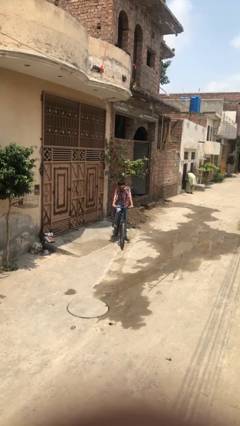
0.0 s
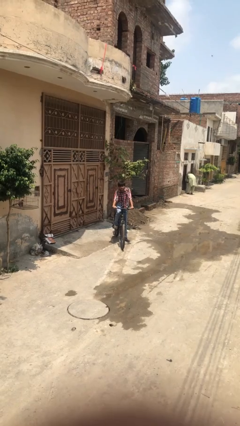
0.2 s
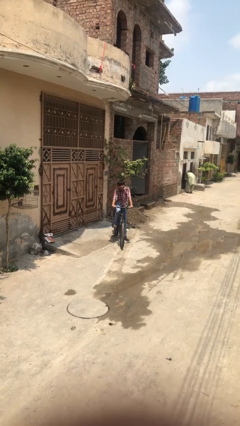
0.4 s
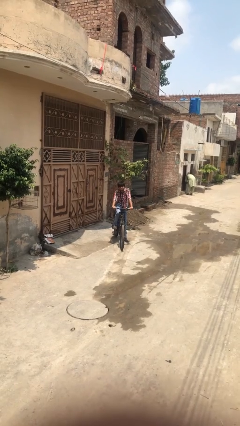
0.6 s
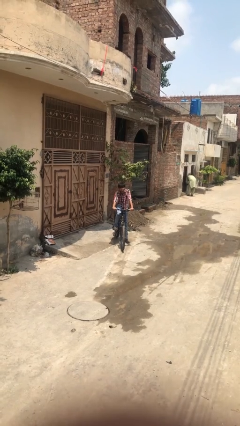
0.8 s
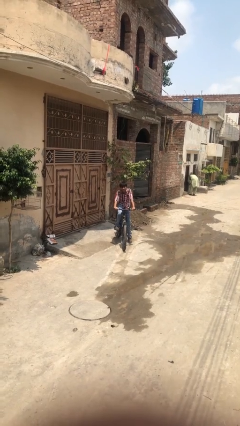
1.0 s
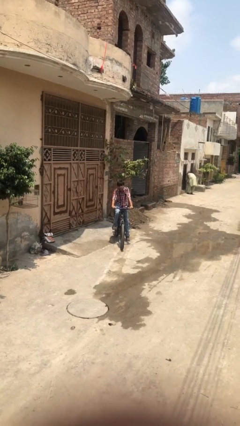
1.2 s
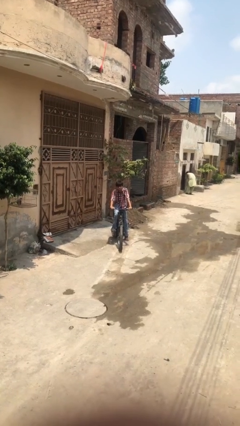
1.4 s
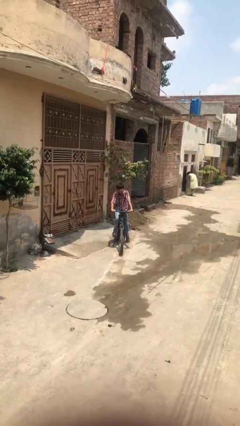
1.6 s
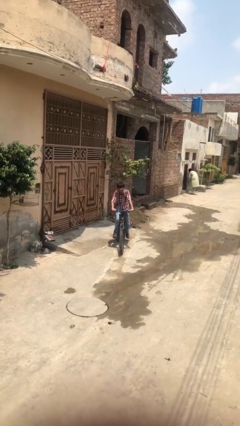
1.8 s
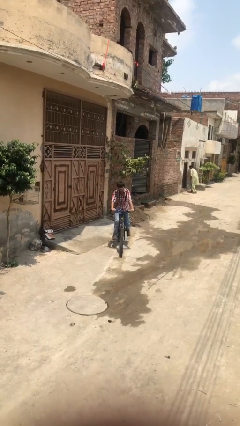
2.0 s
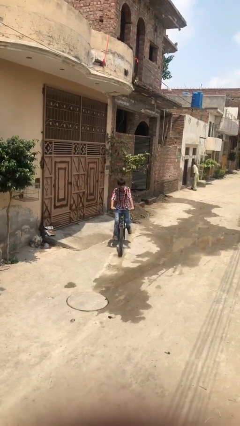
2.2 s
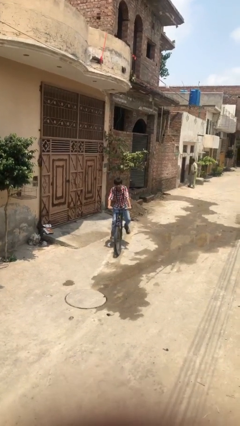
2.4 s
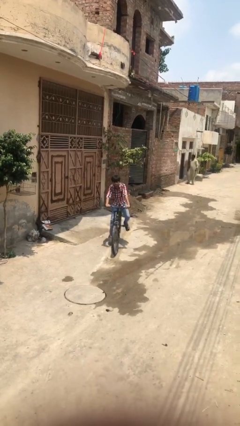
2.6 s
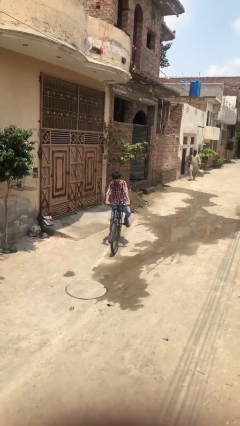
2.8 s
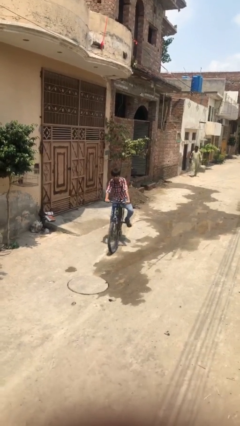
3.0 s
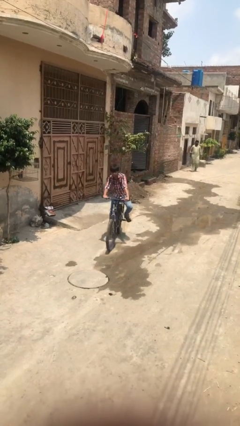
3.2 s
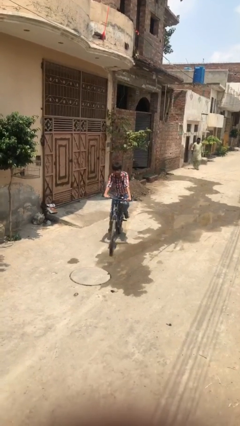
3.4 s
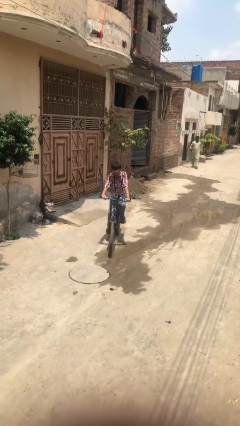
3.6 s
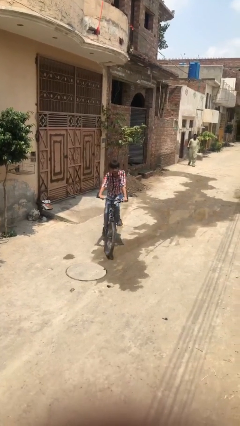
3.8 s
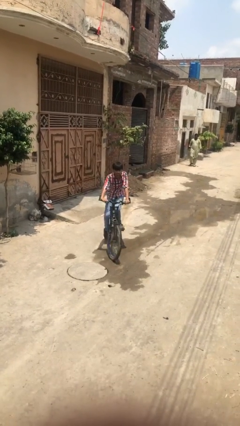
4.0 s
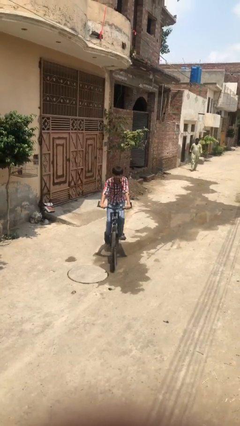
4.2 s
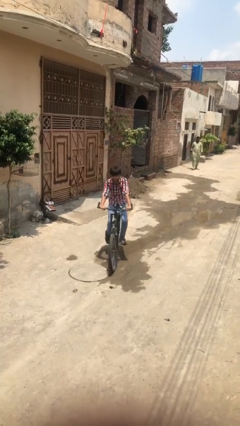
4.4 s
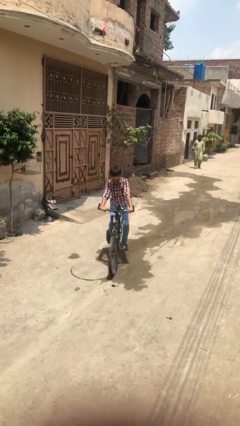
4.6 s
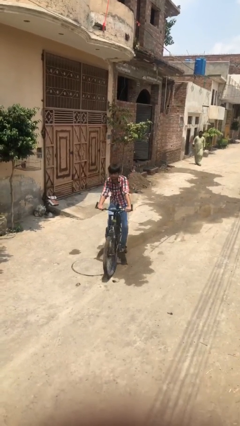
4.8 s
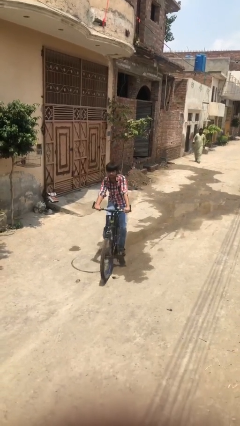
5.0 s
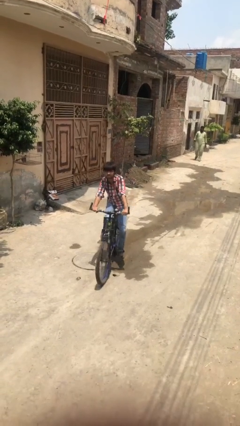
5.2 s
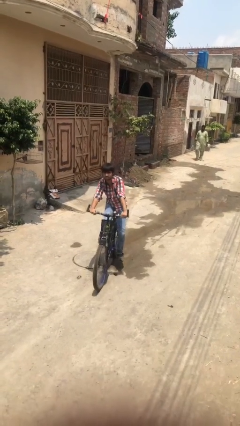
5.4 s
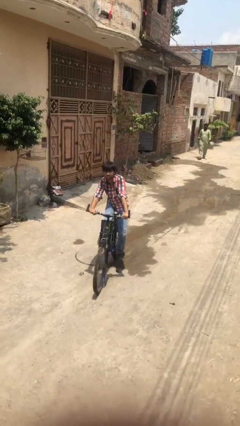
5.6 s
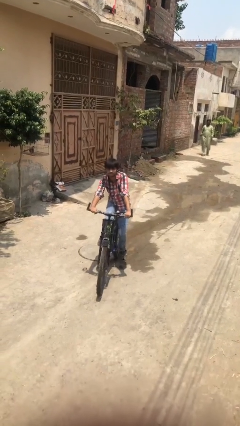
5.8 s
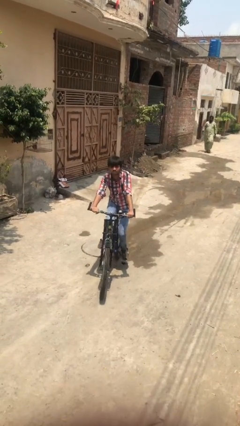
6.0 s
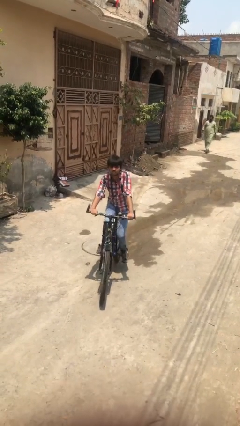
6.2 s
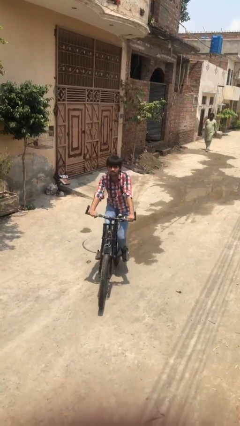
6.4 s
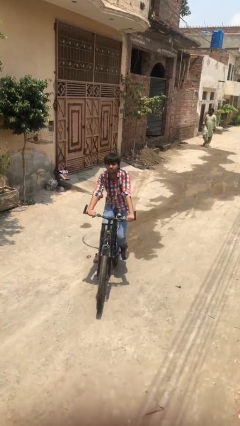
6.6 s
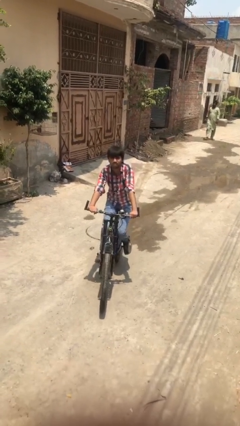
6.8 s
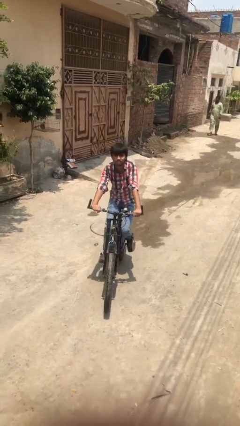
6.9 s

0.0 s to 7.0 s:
person rides bicycle

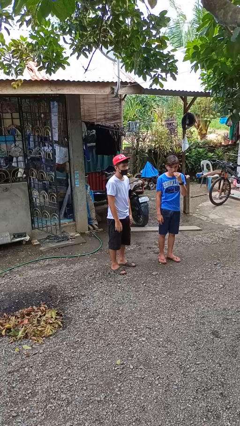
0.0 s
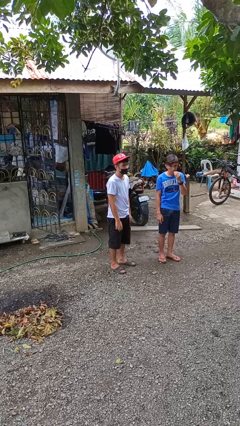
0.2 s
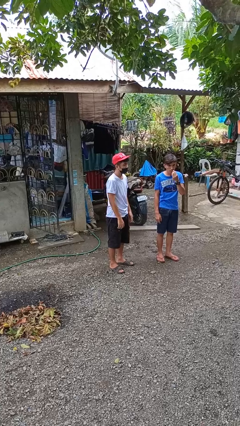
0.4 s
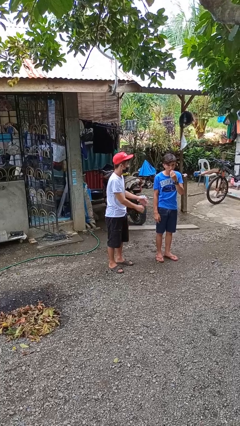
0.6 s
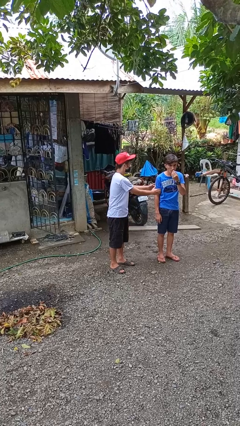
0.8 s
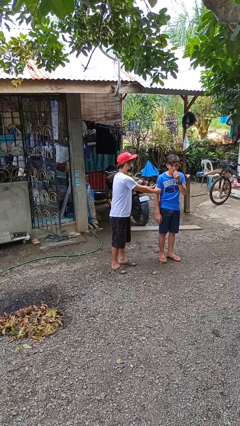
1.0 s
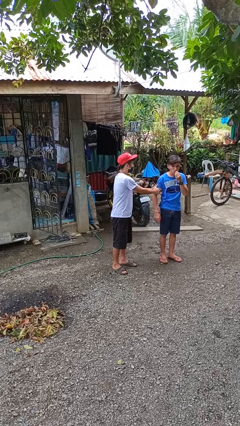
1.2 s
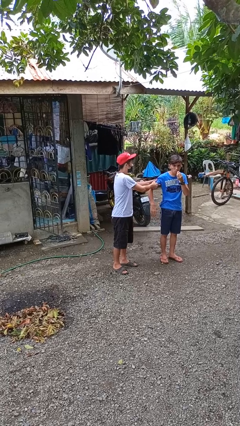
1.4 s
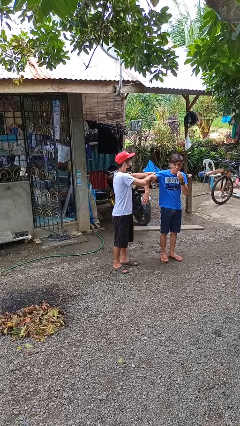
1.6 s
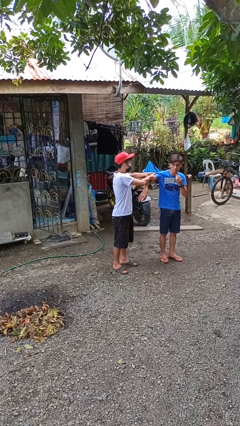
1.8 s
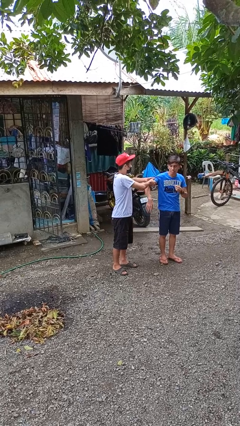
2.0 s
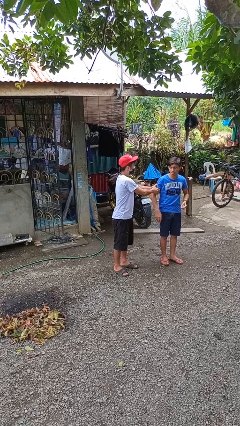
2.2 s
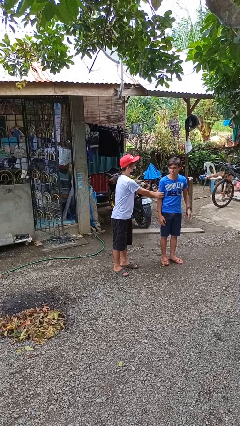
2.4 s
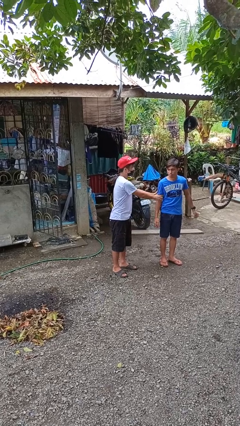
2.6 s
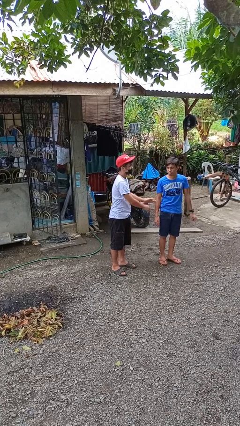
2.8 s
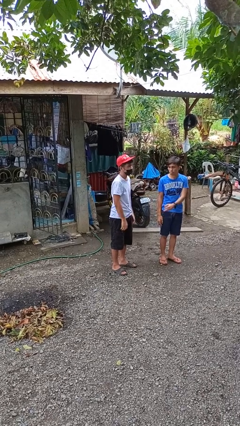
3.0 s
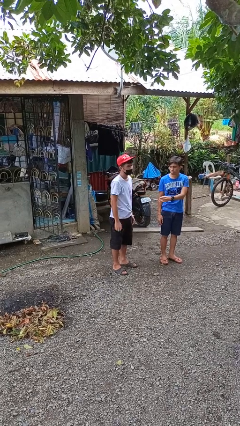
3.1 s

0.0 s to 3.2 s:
person grabs person by bicep

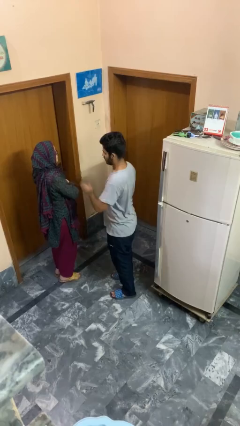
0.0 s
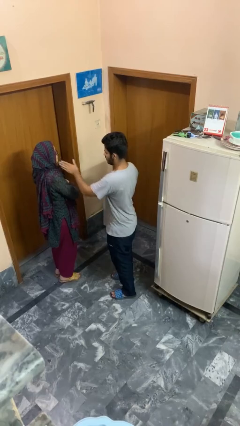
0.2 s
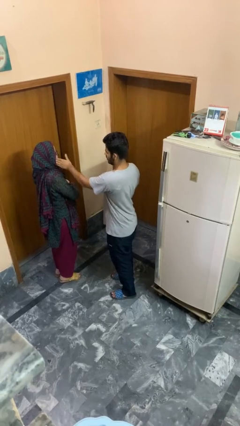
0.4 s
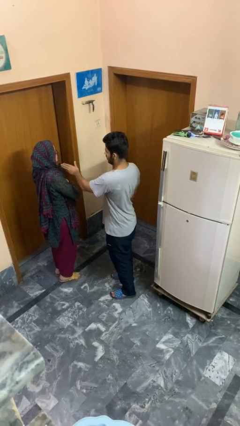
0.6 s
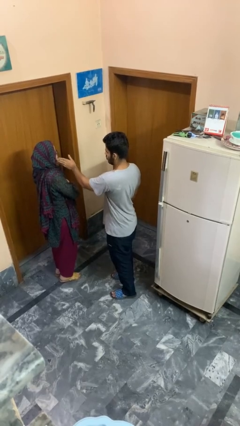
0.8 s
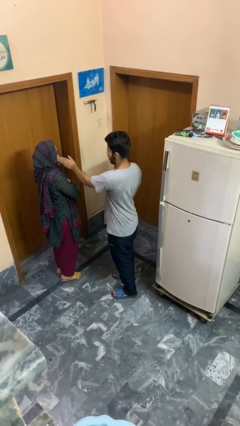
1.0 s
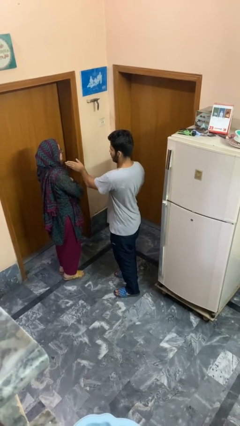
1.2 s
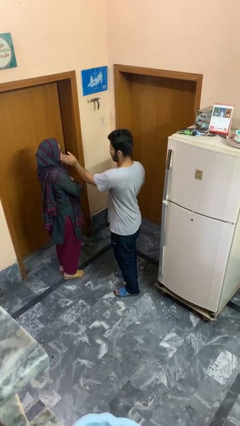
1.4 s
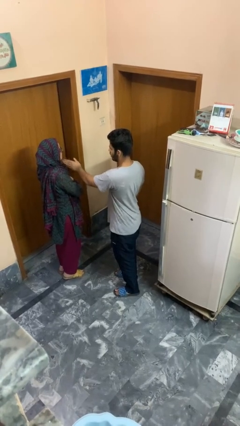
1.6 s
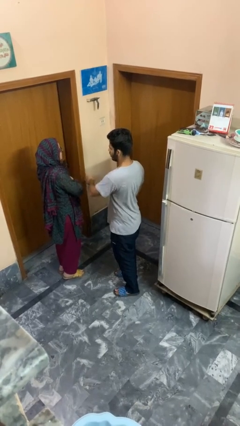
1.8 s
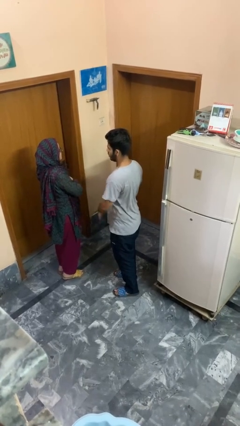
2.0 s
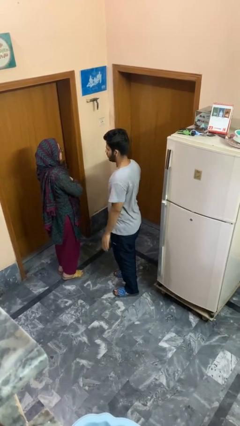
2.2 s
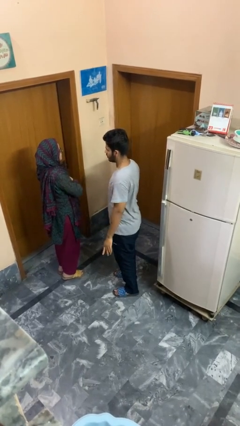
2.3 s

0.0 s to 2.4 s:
person touches face of person

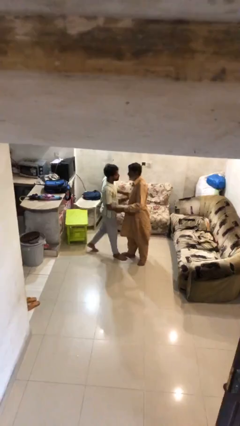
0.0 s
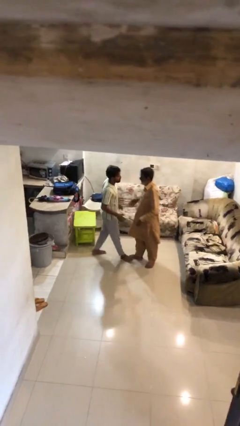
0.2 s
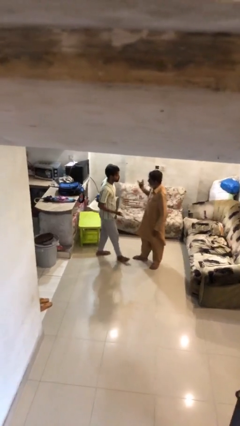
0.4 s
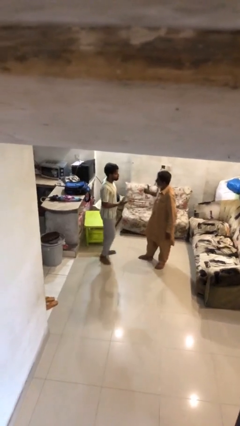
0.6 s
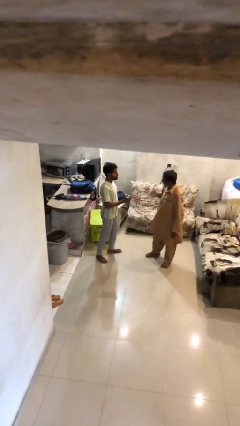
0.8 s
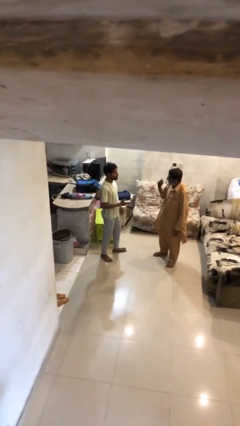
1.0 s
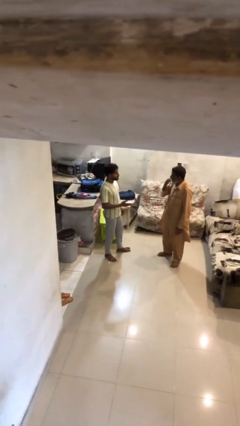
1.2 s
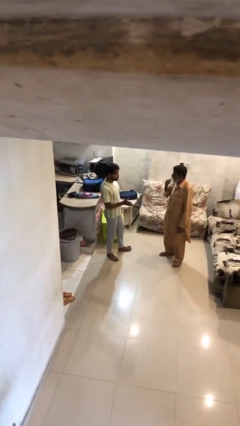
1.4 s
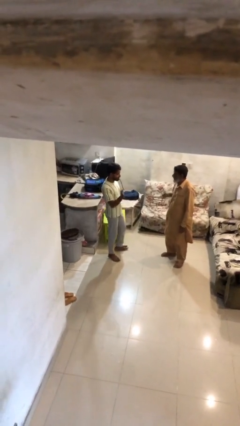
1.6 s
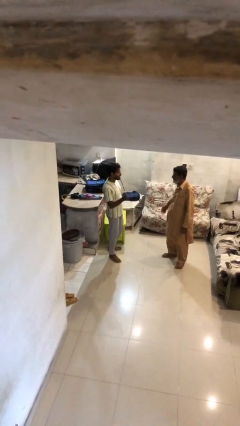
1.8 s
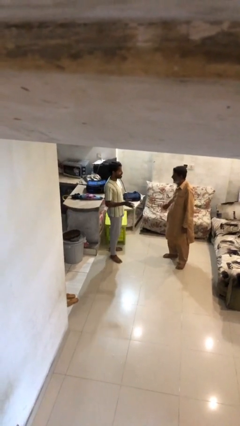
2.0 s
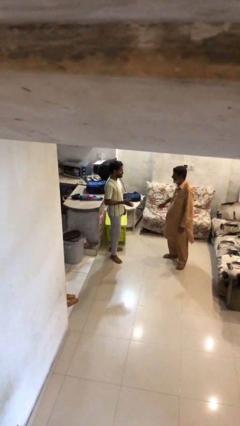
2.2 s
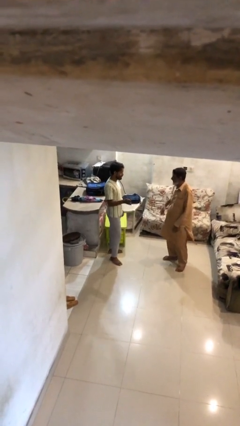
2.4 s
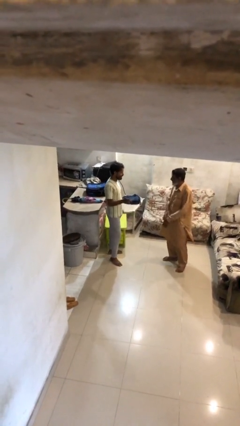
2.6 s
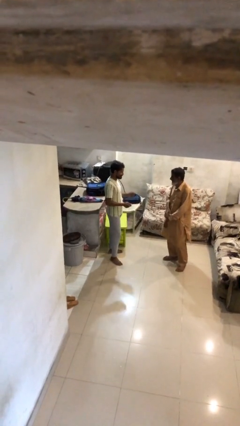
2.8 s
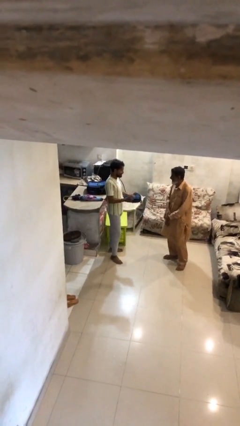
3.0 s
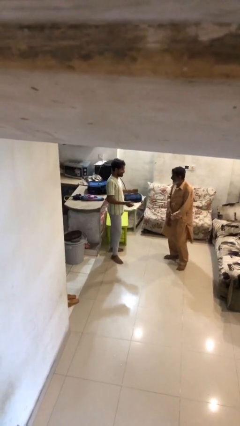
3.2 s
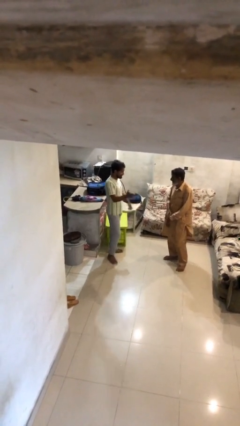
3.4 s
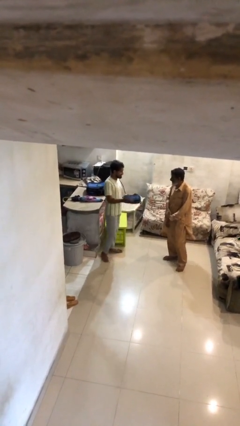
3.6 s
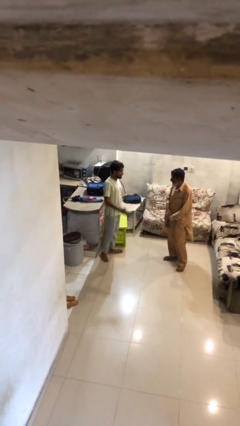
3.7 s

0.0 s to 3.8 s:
person talks to person

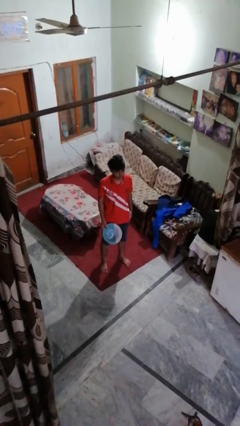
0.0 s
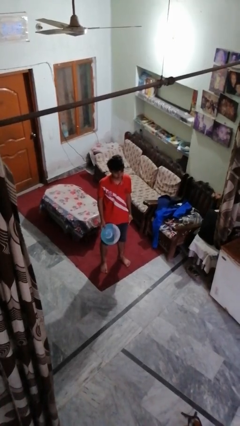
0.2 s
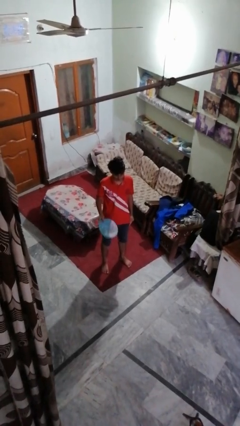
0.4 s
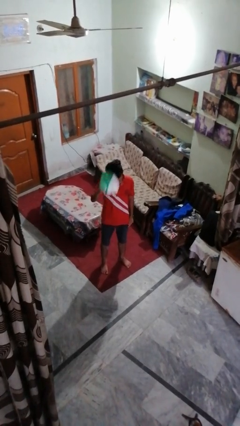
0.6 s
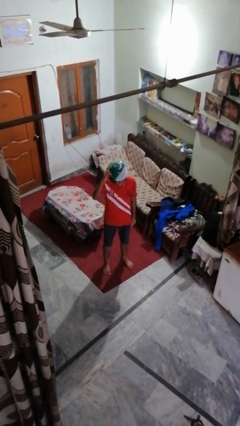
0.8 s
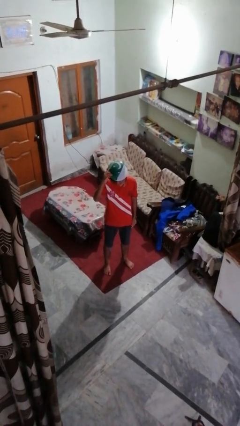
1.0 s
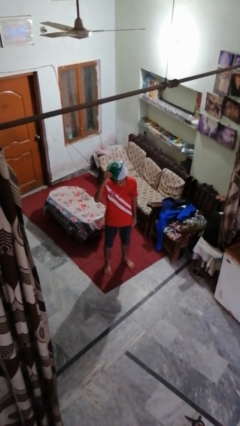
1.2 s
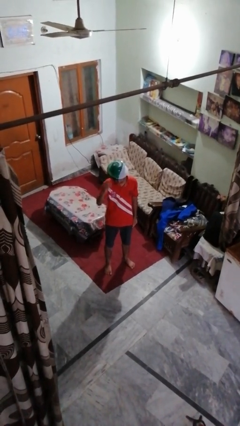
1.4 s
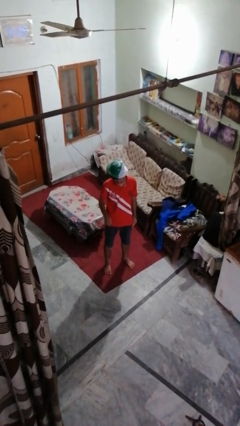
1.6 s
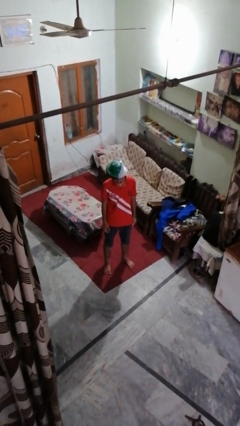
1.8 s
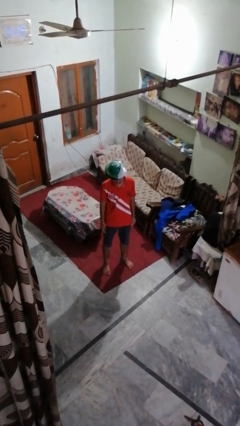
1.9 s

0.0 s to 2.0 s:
person puts on hat
